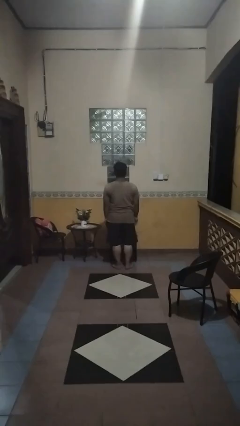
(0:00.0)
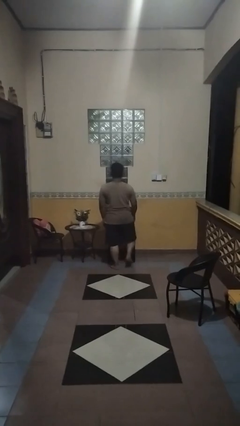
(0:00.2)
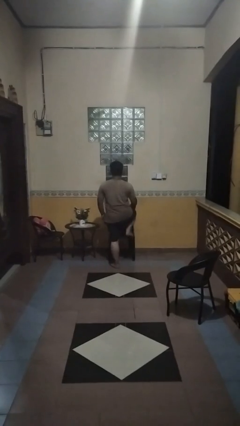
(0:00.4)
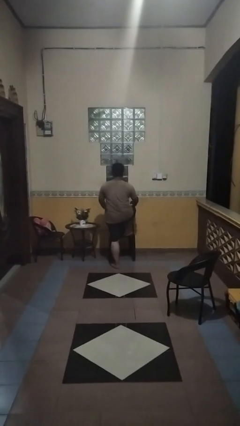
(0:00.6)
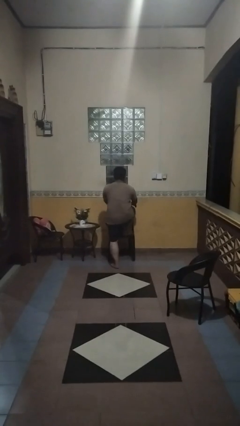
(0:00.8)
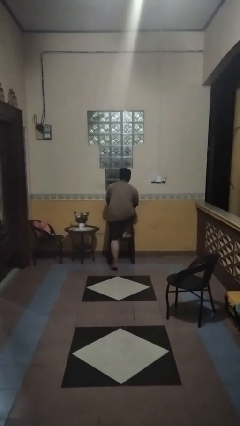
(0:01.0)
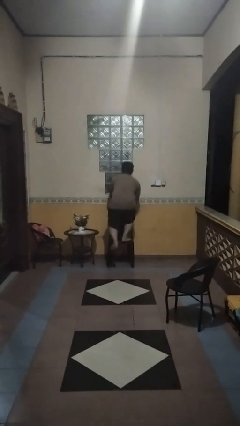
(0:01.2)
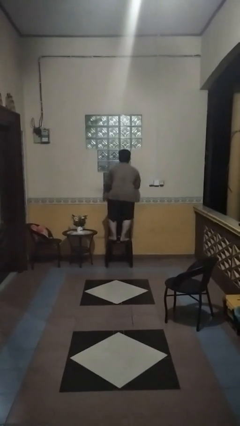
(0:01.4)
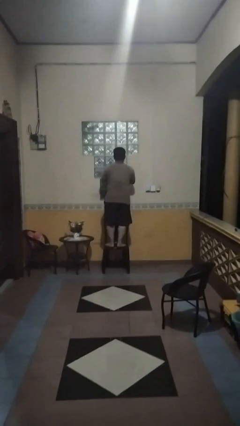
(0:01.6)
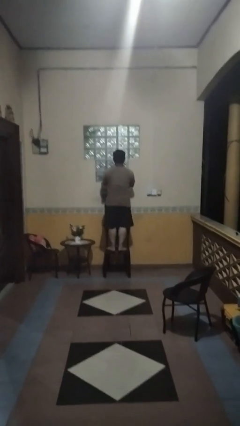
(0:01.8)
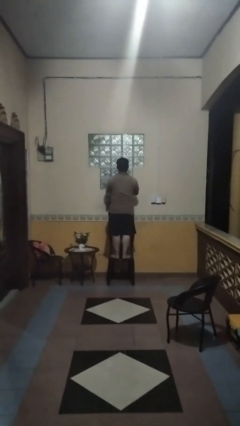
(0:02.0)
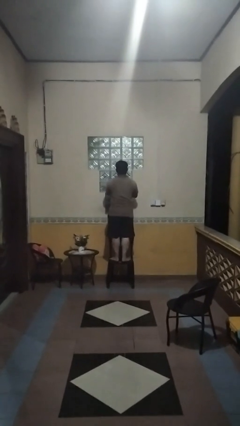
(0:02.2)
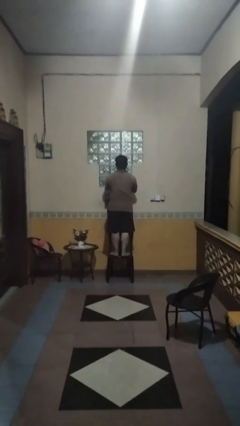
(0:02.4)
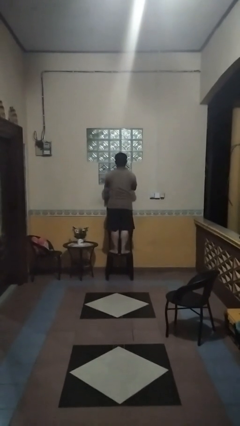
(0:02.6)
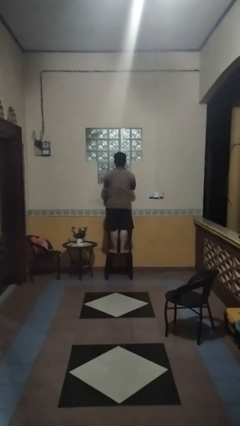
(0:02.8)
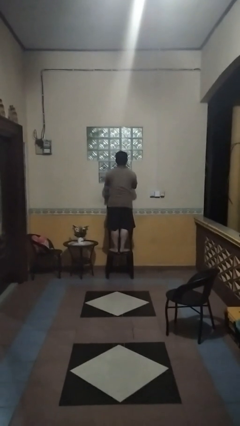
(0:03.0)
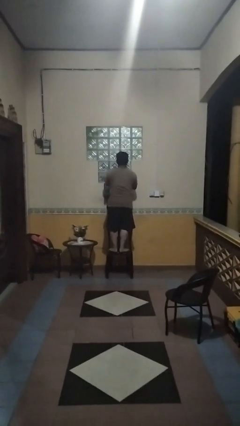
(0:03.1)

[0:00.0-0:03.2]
person climbs on chair

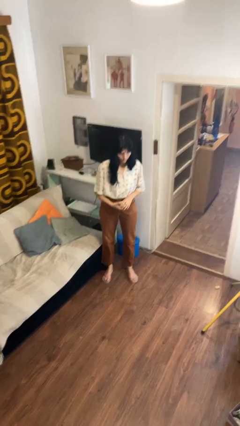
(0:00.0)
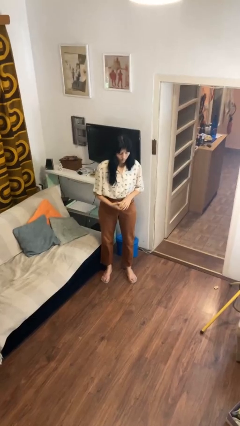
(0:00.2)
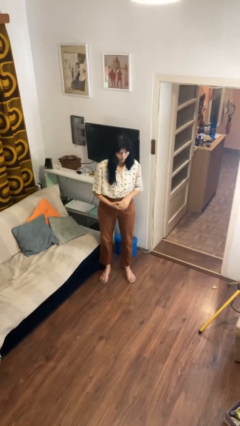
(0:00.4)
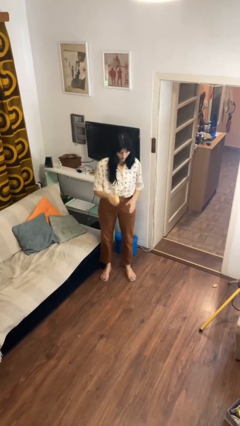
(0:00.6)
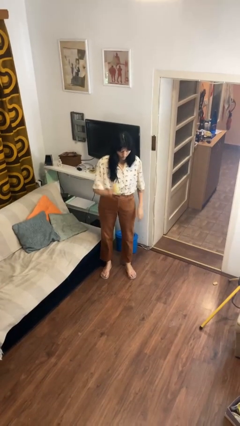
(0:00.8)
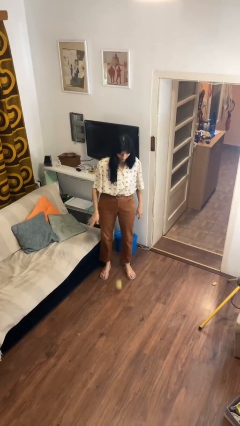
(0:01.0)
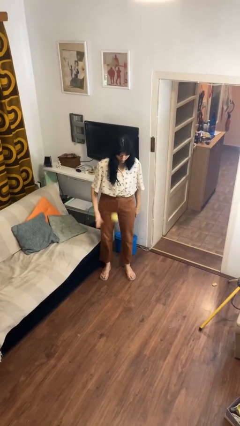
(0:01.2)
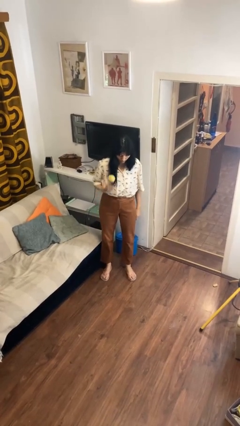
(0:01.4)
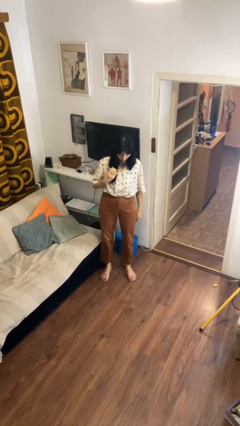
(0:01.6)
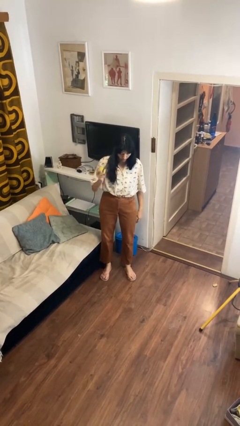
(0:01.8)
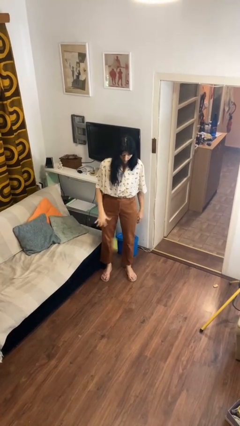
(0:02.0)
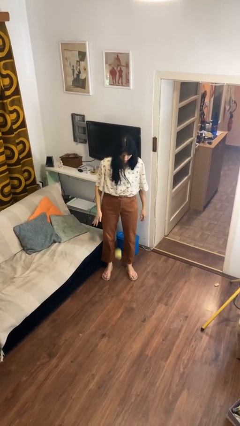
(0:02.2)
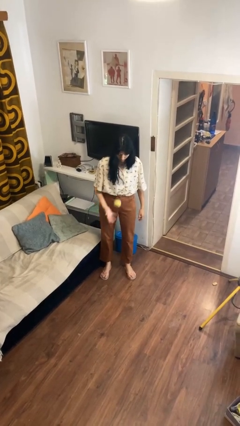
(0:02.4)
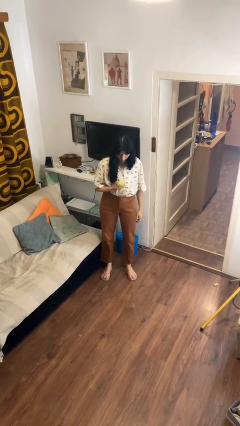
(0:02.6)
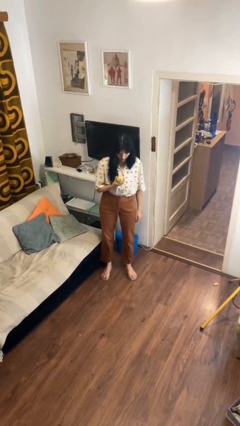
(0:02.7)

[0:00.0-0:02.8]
person bounces ball on floor

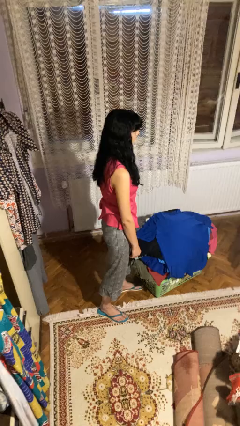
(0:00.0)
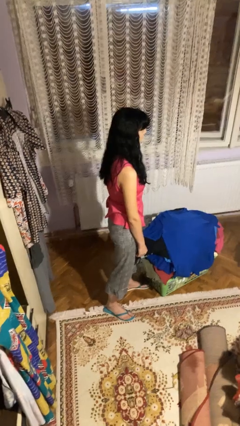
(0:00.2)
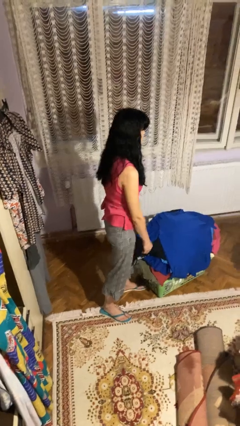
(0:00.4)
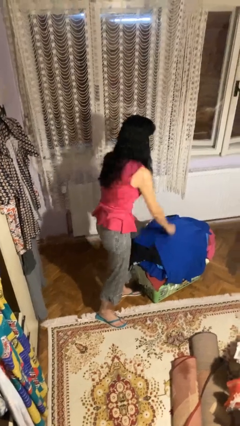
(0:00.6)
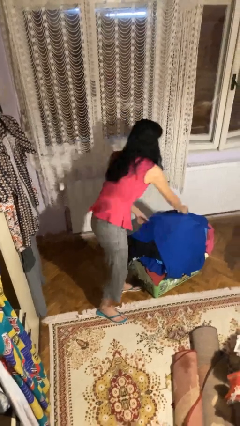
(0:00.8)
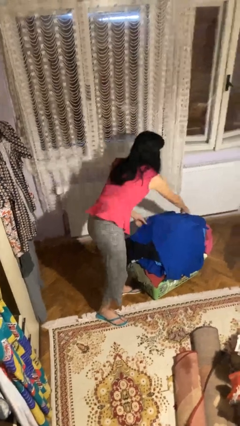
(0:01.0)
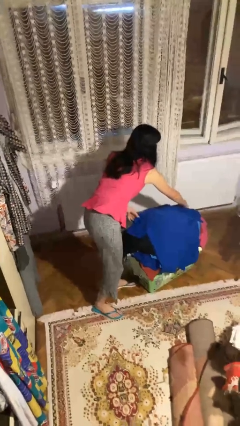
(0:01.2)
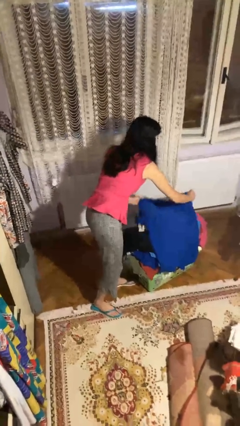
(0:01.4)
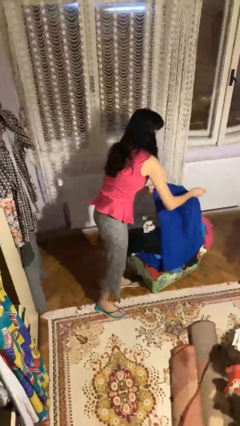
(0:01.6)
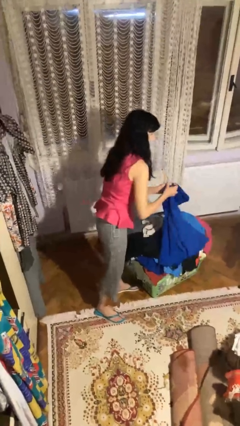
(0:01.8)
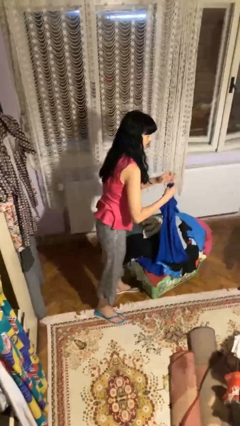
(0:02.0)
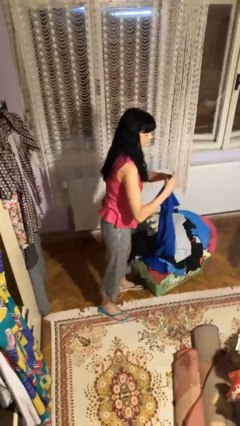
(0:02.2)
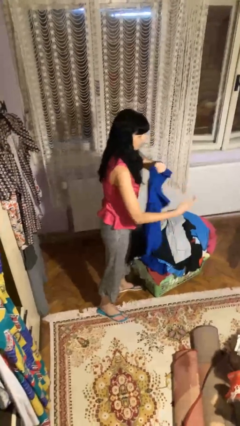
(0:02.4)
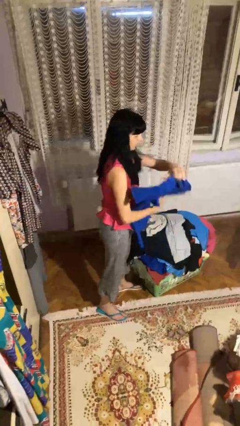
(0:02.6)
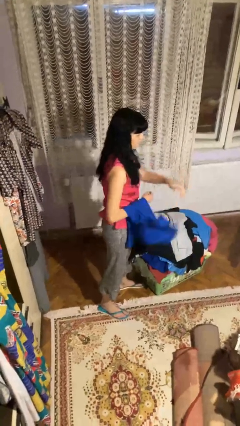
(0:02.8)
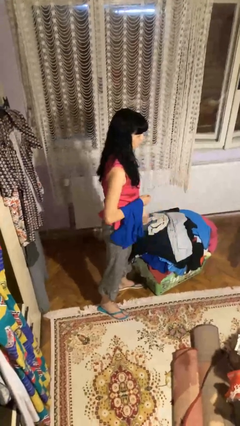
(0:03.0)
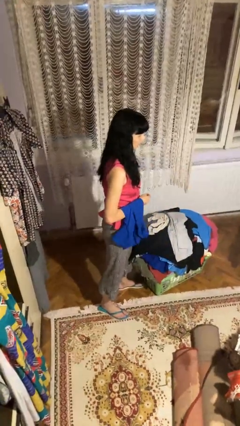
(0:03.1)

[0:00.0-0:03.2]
person folds shirt

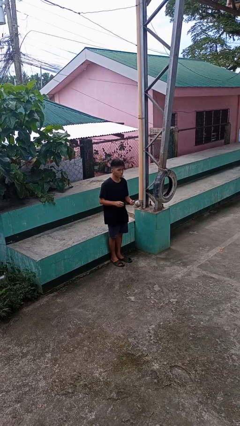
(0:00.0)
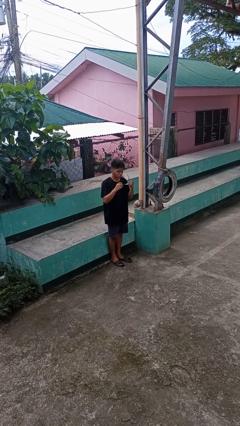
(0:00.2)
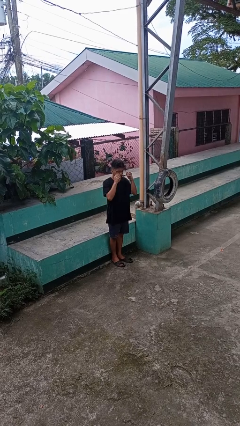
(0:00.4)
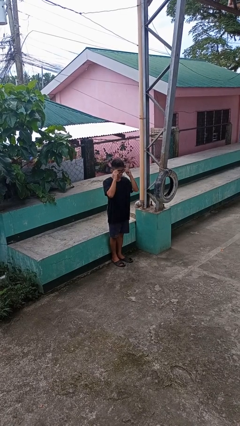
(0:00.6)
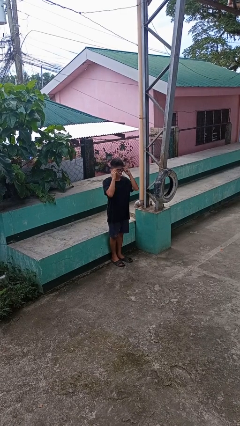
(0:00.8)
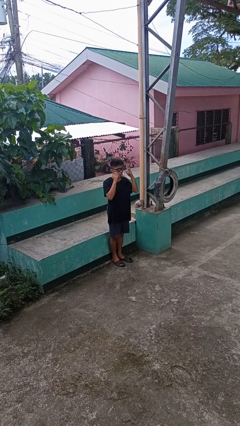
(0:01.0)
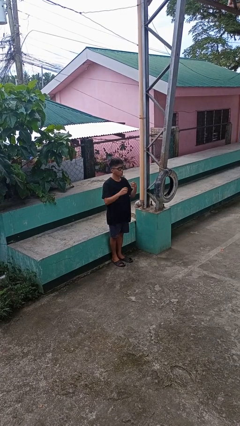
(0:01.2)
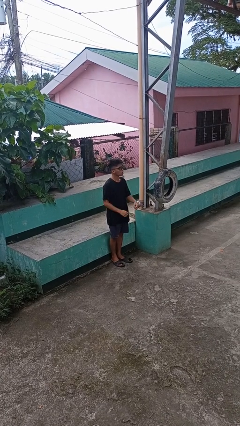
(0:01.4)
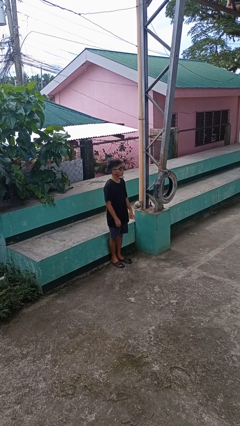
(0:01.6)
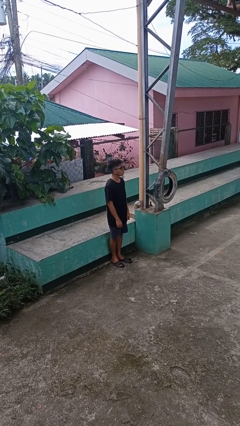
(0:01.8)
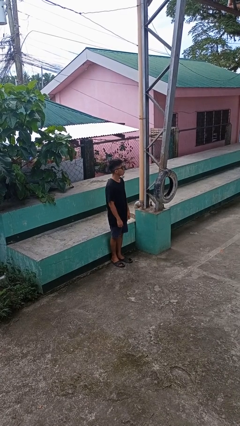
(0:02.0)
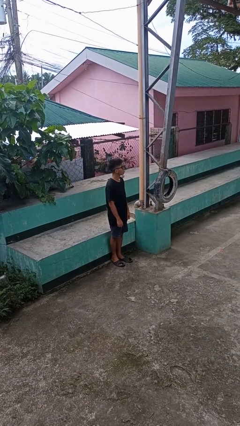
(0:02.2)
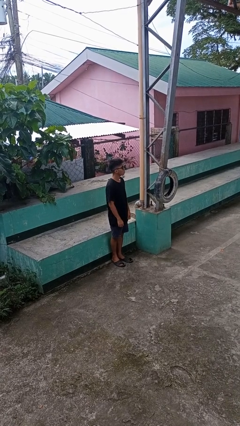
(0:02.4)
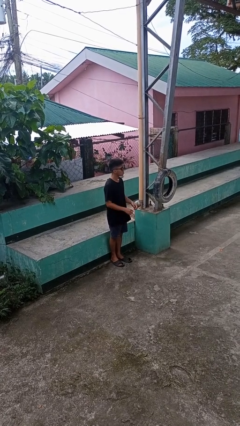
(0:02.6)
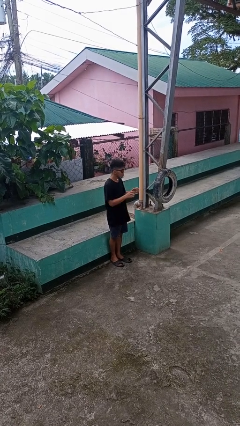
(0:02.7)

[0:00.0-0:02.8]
person puts on sunglasses

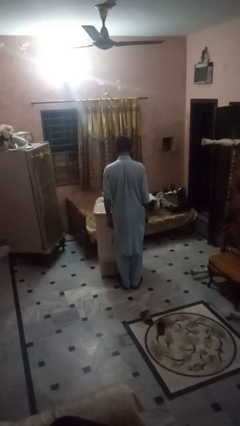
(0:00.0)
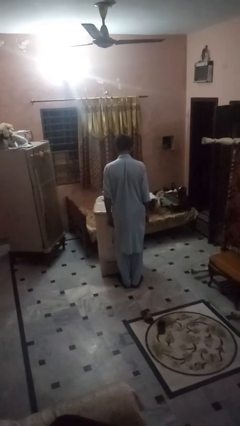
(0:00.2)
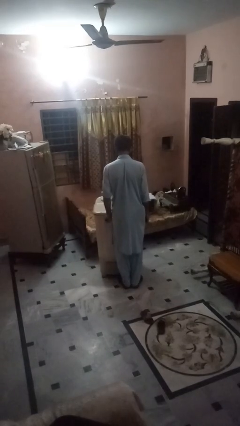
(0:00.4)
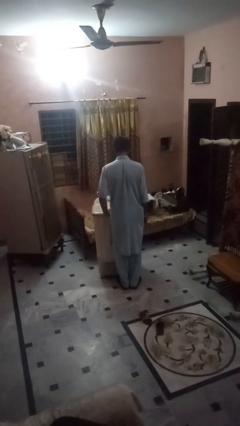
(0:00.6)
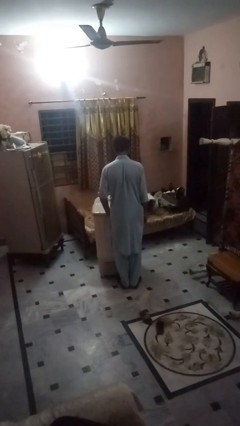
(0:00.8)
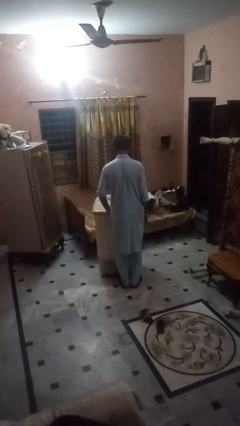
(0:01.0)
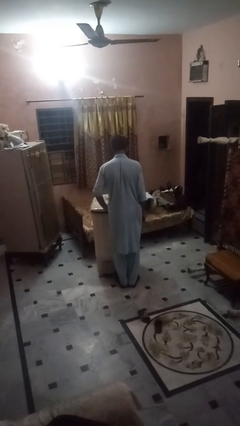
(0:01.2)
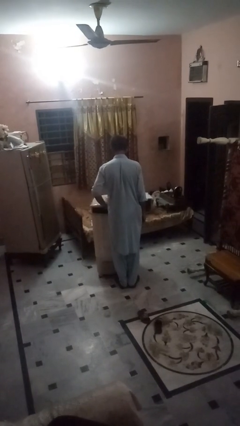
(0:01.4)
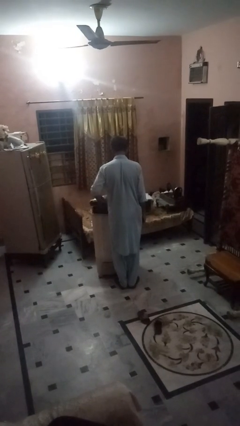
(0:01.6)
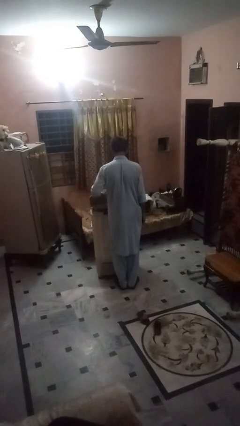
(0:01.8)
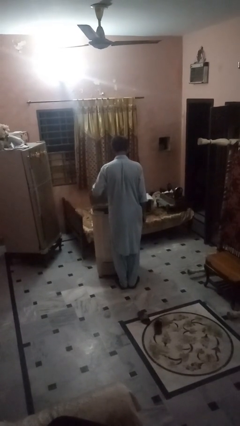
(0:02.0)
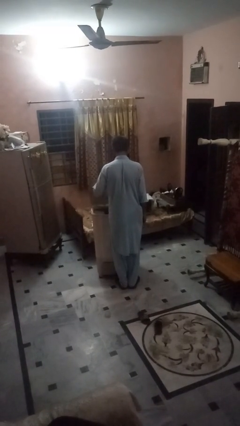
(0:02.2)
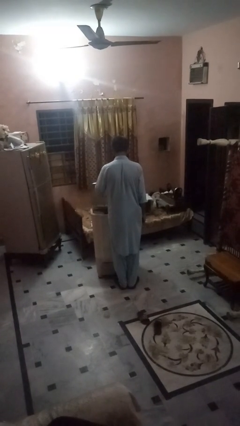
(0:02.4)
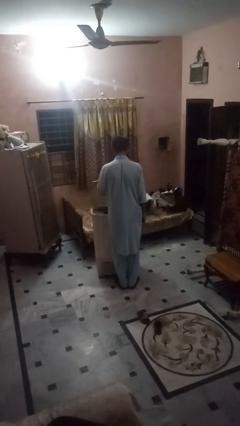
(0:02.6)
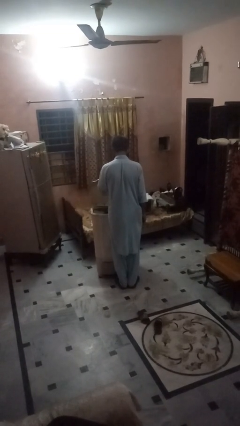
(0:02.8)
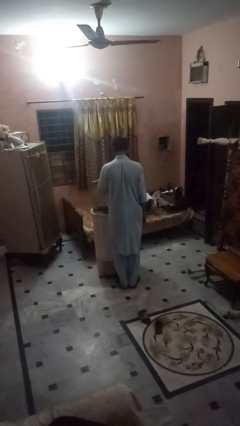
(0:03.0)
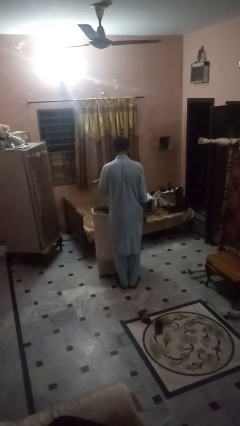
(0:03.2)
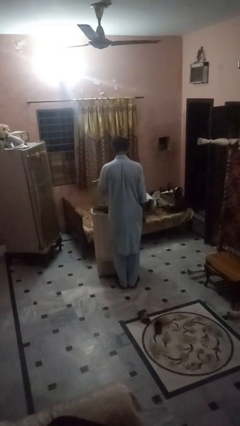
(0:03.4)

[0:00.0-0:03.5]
person opens clothes washer

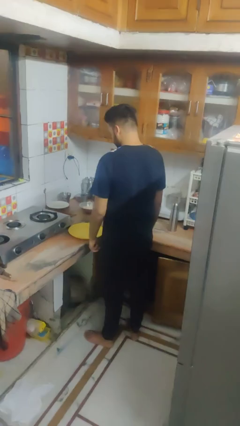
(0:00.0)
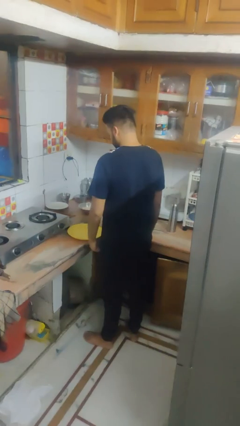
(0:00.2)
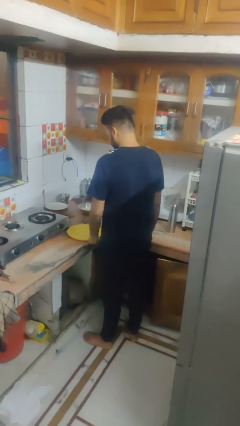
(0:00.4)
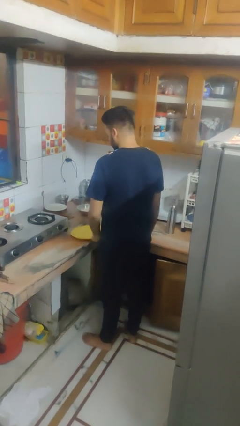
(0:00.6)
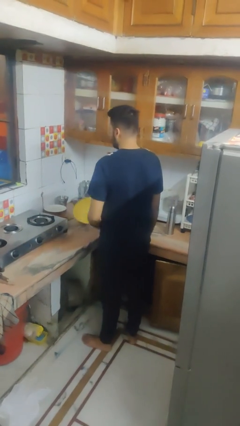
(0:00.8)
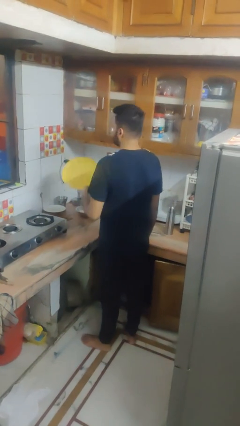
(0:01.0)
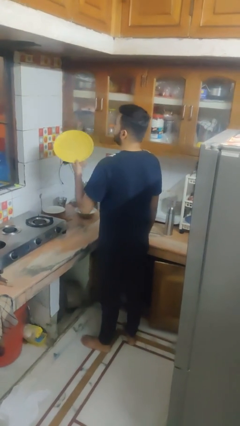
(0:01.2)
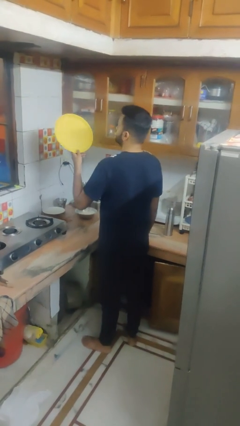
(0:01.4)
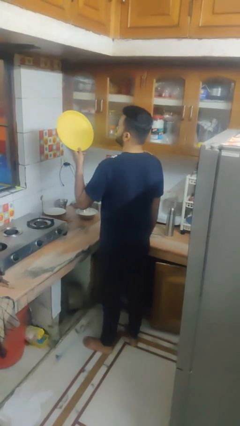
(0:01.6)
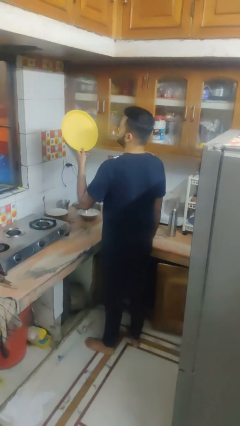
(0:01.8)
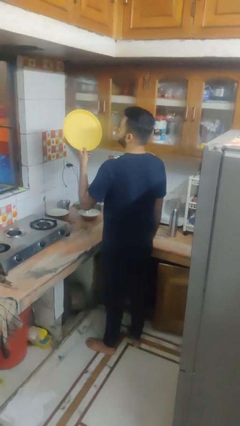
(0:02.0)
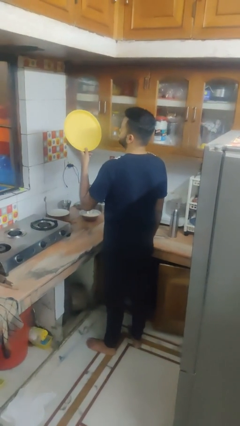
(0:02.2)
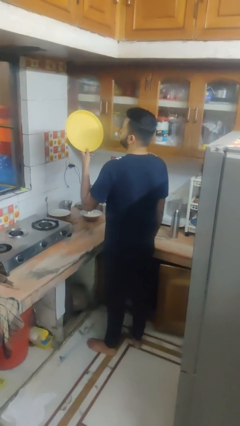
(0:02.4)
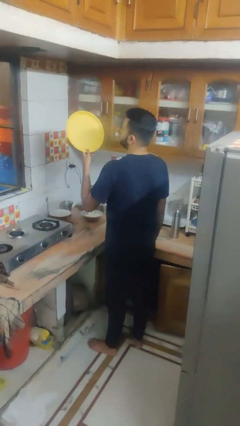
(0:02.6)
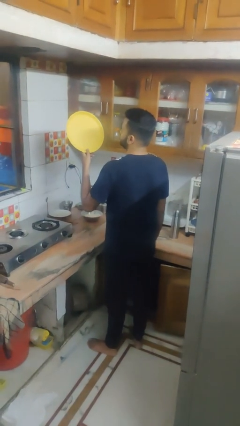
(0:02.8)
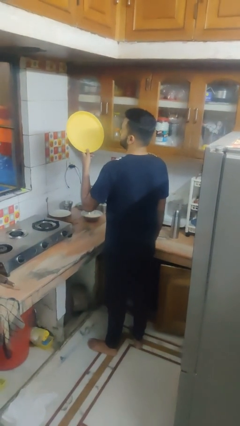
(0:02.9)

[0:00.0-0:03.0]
person picks up object from countertop
